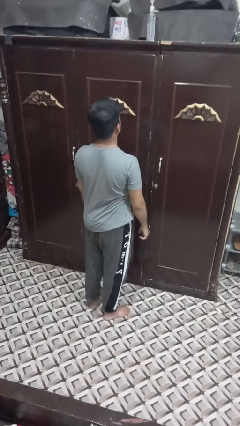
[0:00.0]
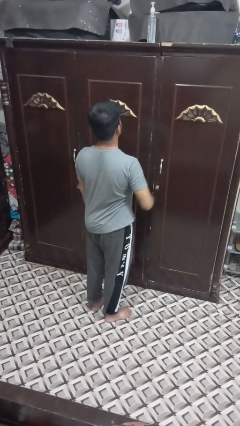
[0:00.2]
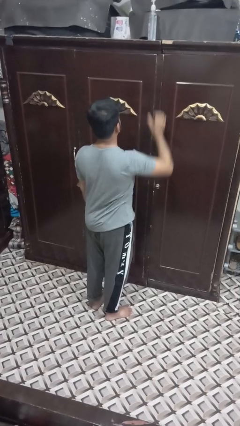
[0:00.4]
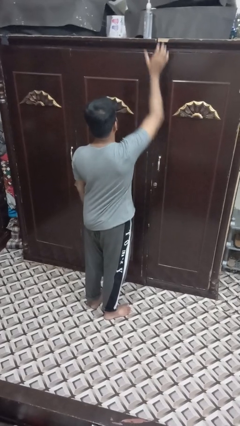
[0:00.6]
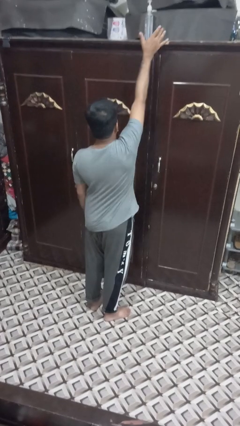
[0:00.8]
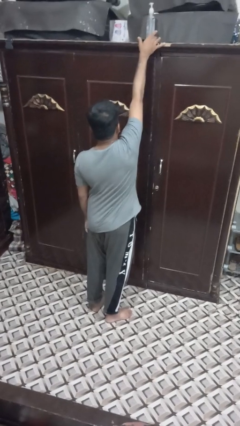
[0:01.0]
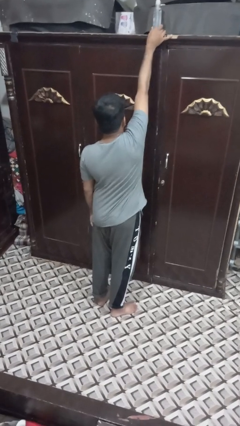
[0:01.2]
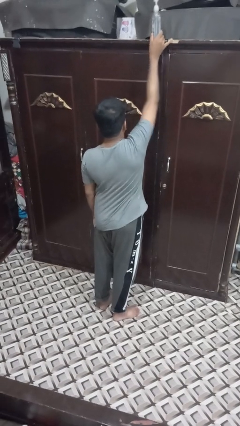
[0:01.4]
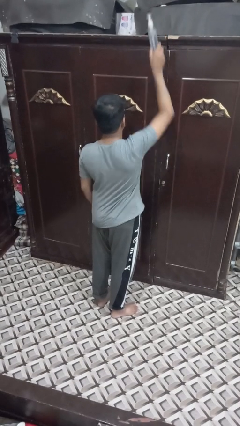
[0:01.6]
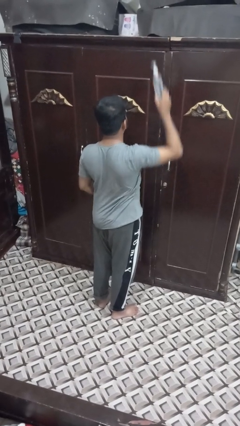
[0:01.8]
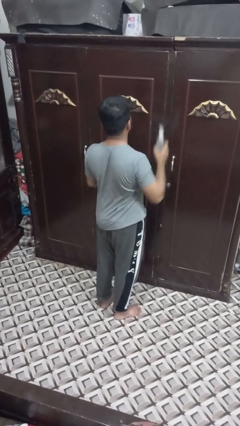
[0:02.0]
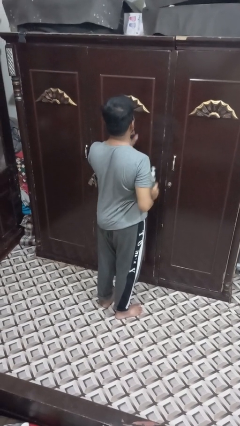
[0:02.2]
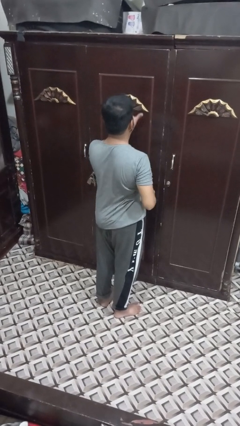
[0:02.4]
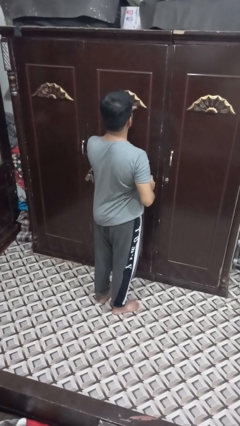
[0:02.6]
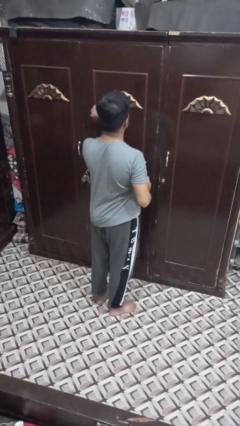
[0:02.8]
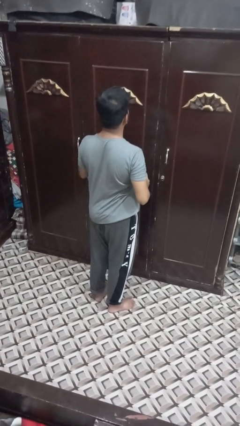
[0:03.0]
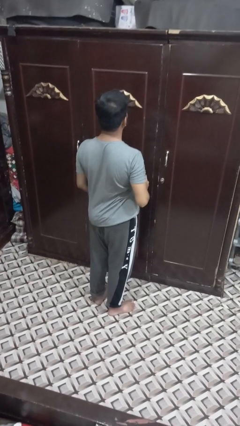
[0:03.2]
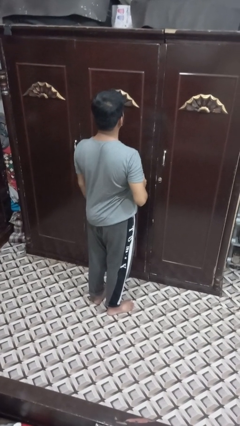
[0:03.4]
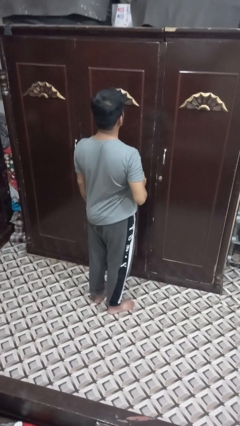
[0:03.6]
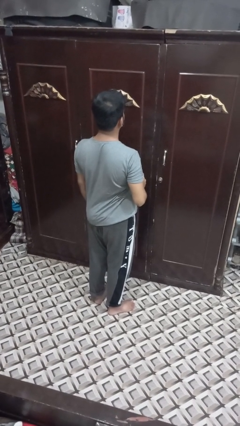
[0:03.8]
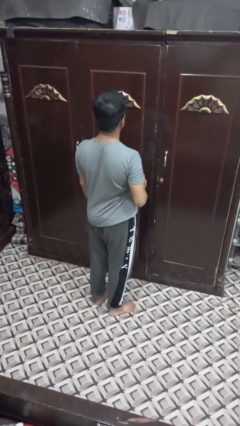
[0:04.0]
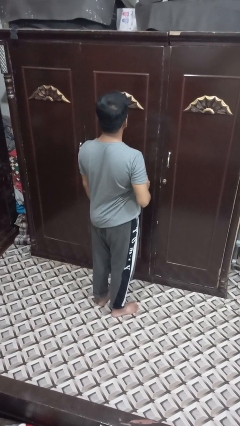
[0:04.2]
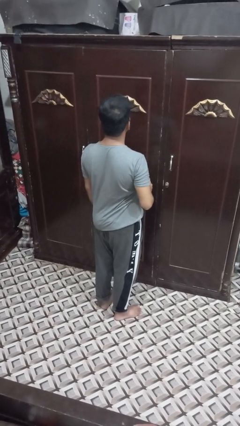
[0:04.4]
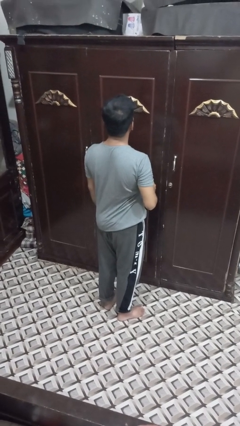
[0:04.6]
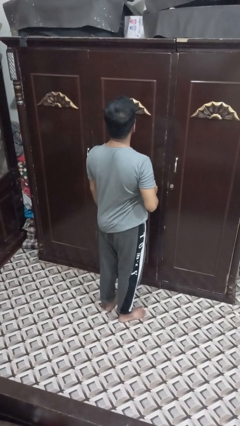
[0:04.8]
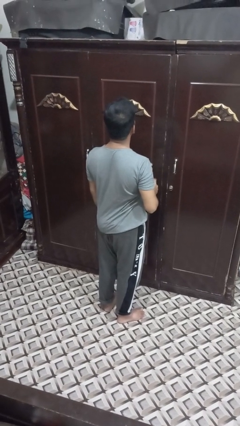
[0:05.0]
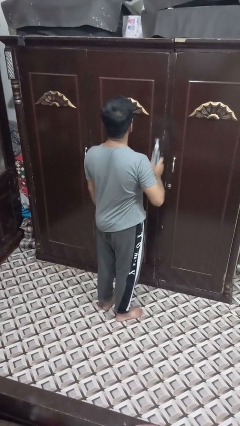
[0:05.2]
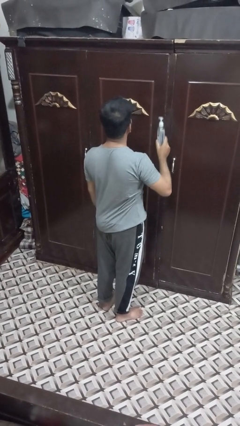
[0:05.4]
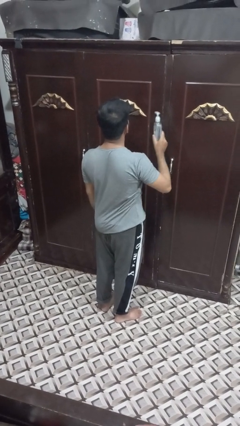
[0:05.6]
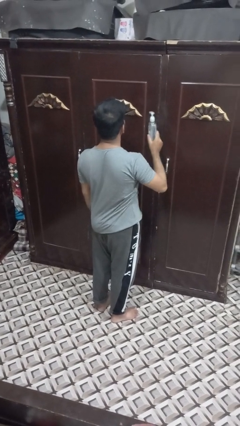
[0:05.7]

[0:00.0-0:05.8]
person picks up object from shelf

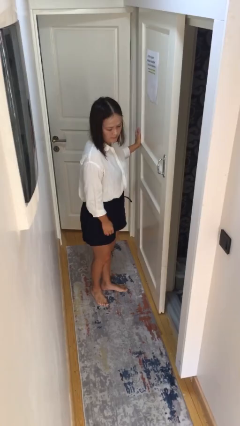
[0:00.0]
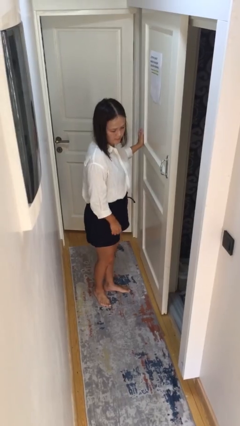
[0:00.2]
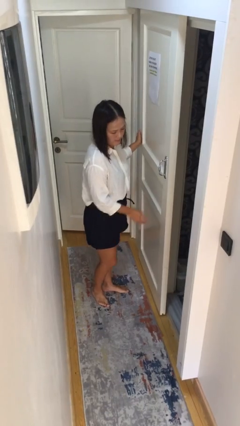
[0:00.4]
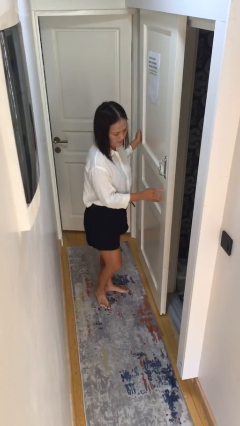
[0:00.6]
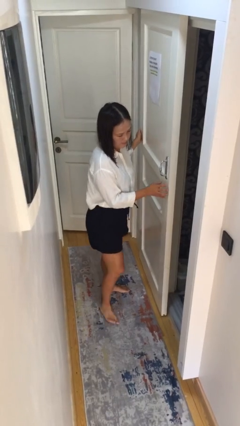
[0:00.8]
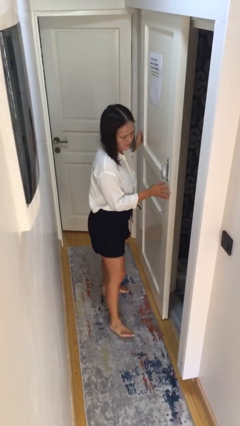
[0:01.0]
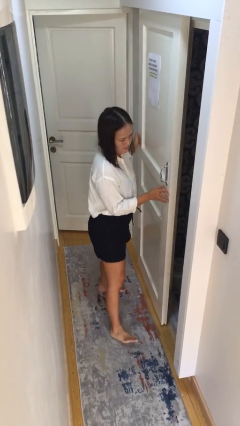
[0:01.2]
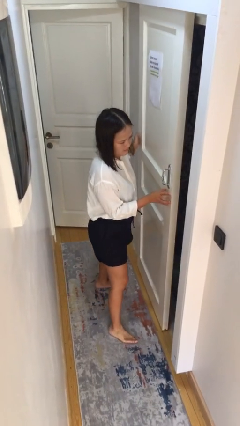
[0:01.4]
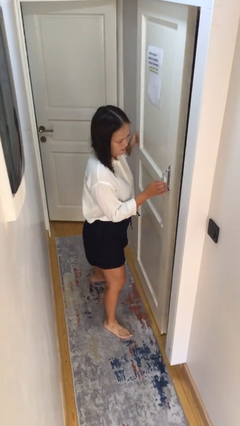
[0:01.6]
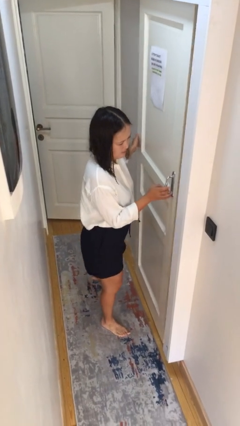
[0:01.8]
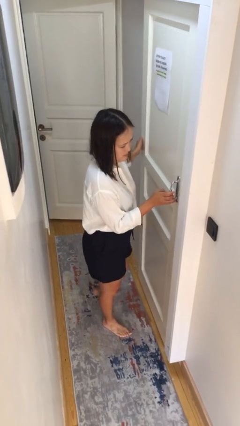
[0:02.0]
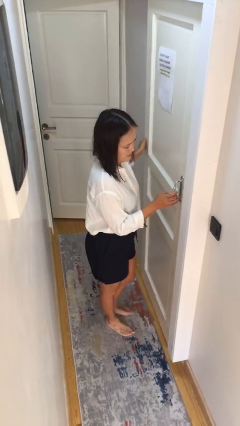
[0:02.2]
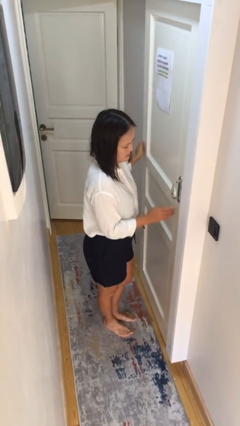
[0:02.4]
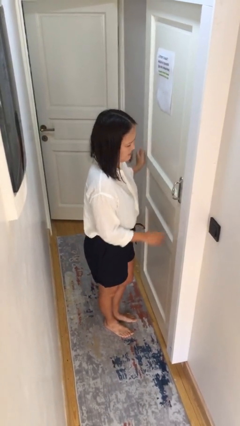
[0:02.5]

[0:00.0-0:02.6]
person closes sliding door

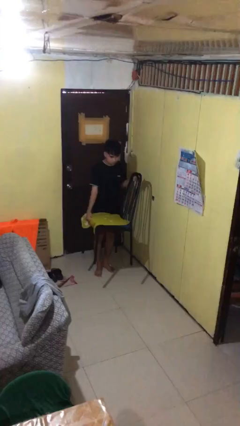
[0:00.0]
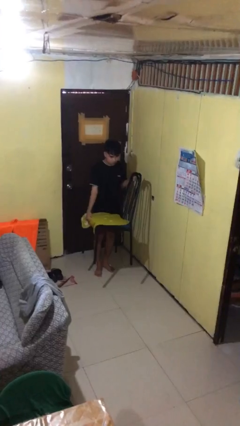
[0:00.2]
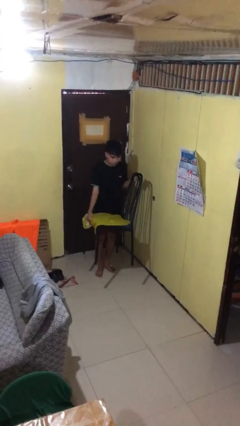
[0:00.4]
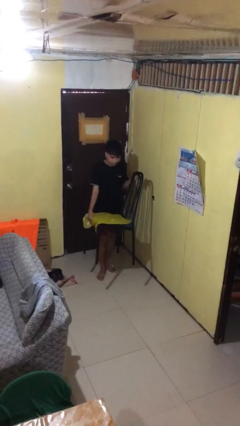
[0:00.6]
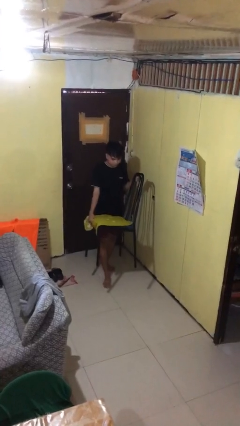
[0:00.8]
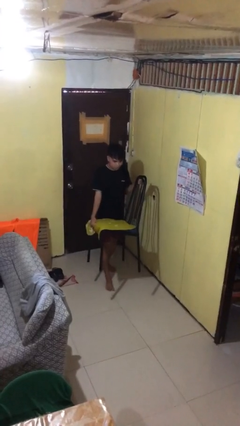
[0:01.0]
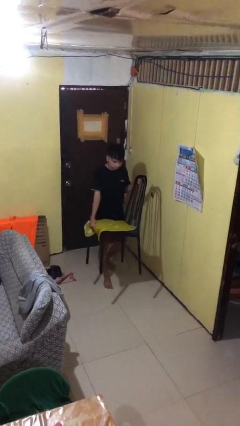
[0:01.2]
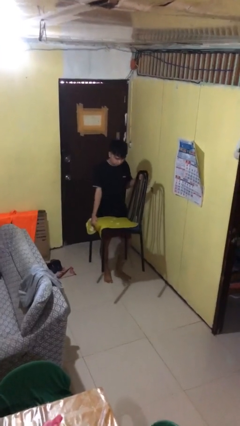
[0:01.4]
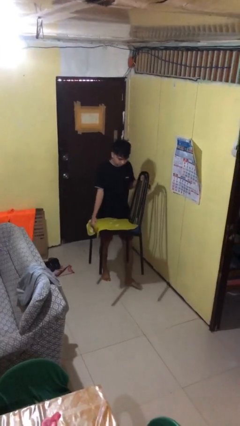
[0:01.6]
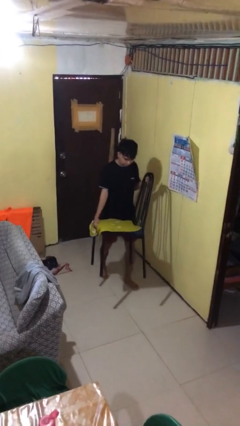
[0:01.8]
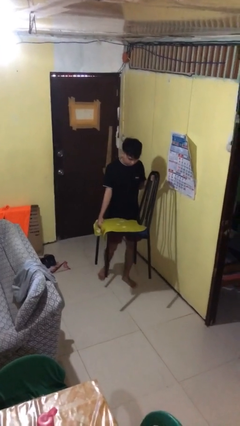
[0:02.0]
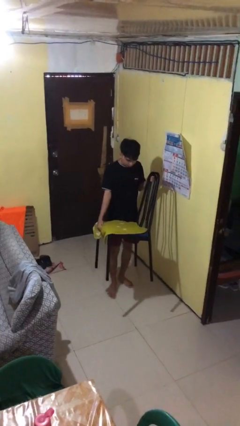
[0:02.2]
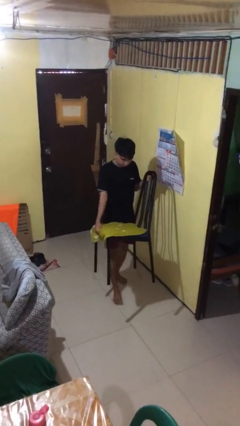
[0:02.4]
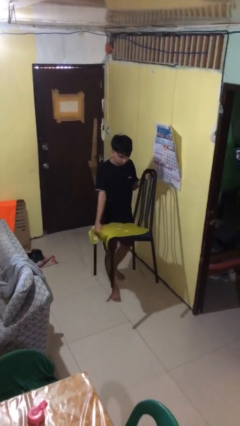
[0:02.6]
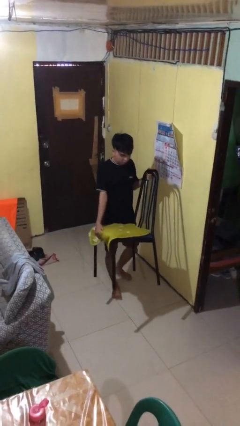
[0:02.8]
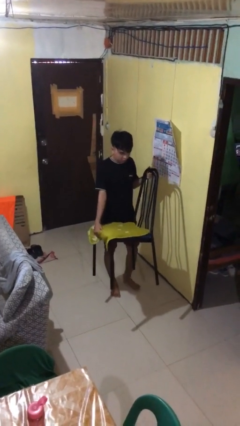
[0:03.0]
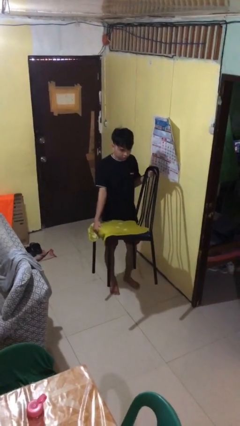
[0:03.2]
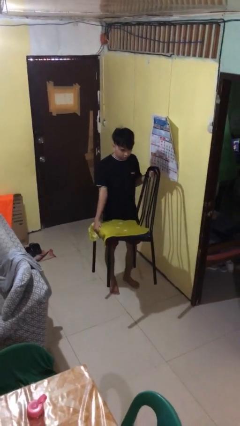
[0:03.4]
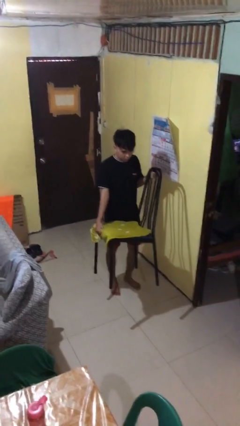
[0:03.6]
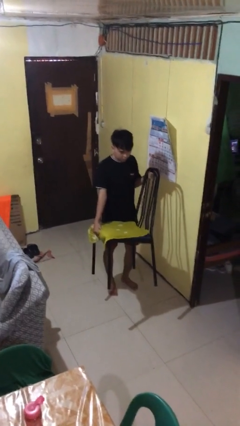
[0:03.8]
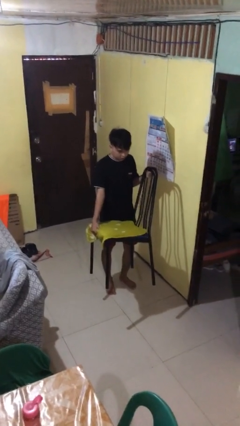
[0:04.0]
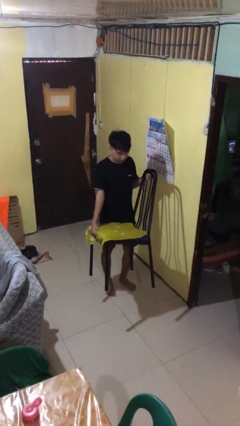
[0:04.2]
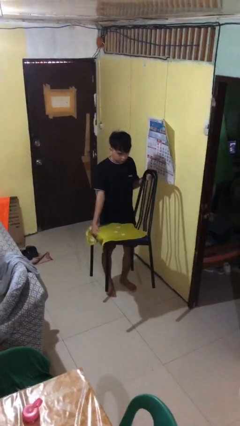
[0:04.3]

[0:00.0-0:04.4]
person carries furniture

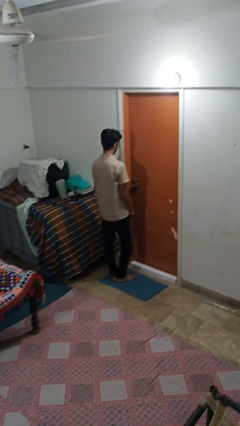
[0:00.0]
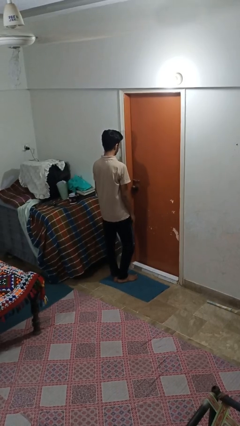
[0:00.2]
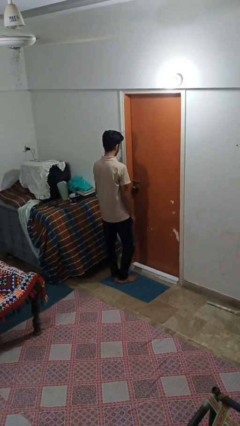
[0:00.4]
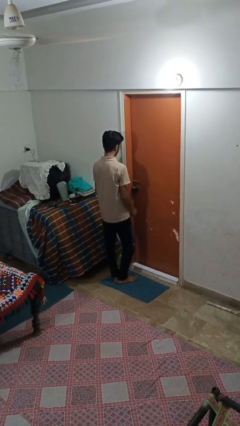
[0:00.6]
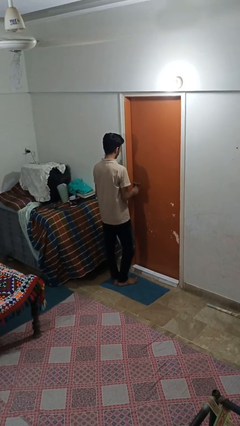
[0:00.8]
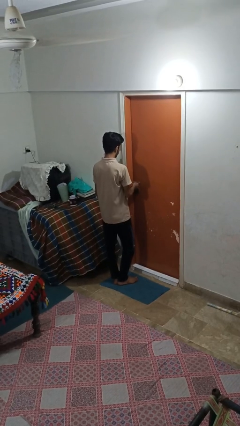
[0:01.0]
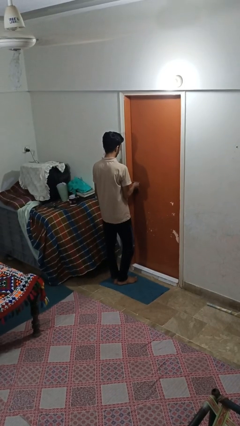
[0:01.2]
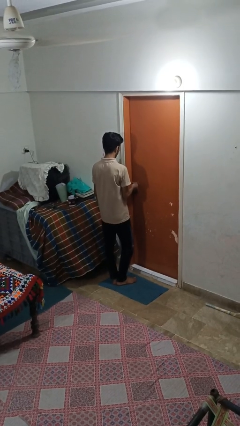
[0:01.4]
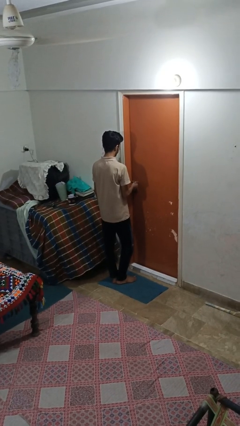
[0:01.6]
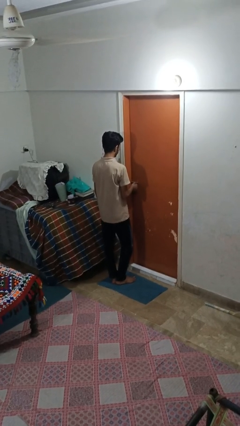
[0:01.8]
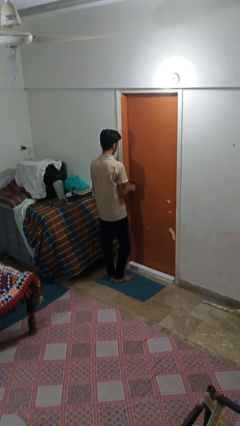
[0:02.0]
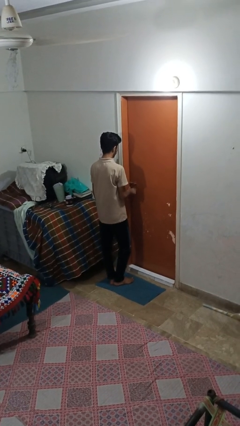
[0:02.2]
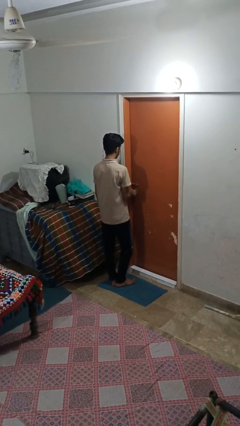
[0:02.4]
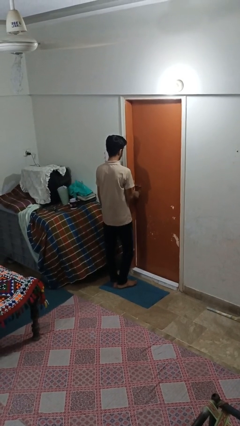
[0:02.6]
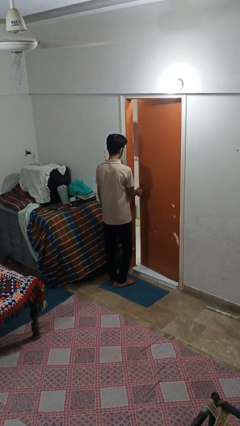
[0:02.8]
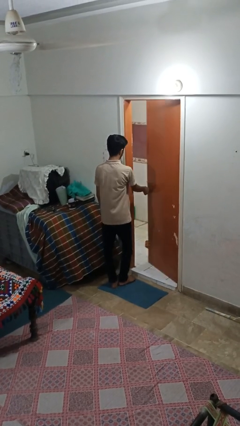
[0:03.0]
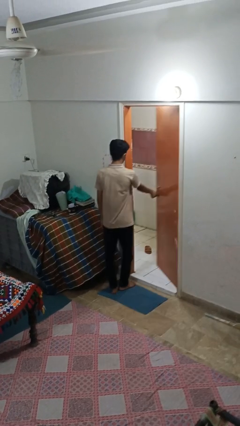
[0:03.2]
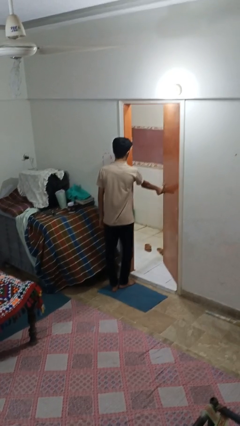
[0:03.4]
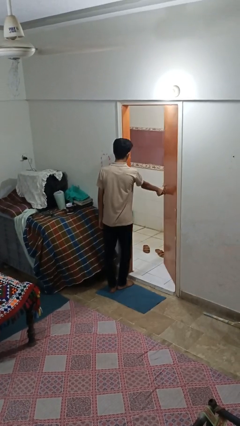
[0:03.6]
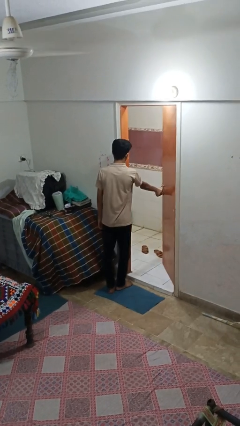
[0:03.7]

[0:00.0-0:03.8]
person unlocks door with keys

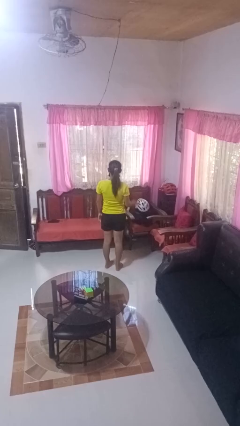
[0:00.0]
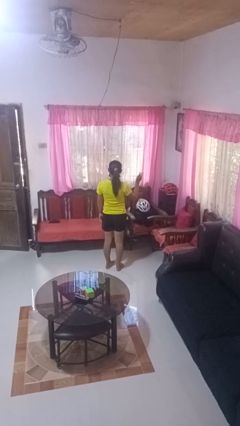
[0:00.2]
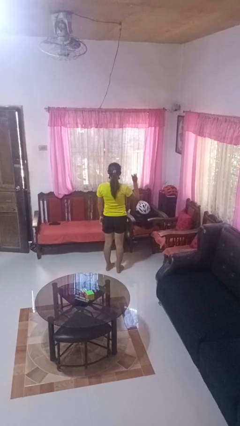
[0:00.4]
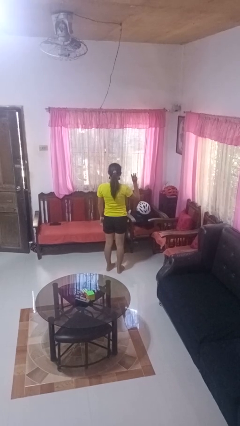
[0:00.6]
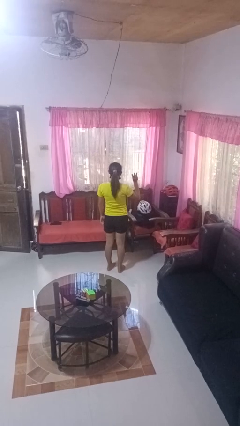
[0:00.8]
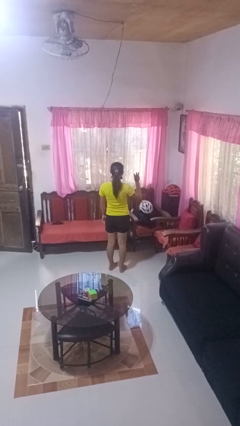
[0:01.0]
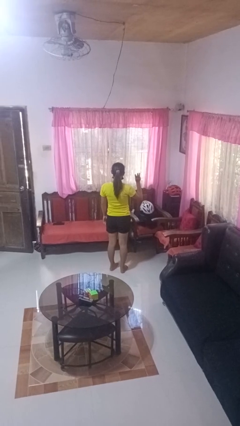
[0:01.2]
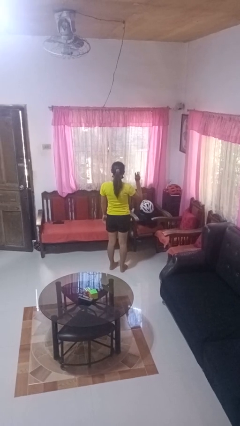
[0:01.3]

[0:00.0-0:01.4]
person gestures number three
